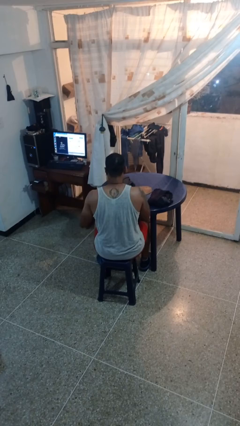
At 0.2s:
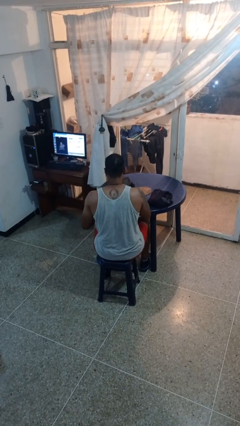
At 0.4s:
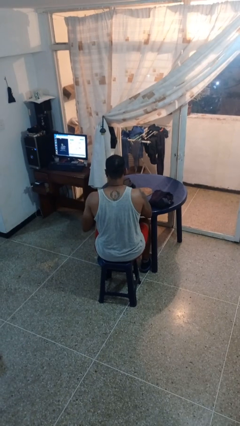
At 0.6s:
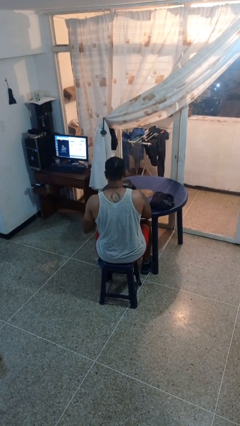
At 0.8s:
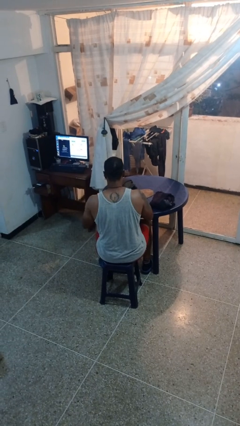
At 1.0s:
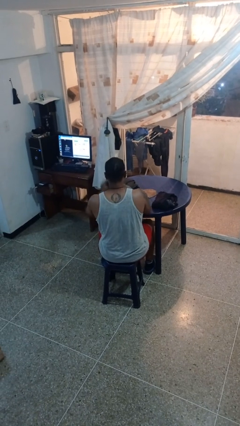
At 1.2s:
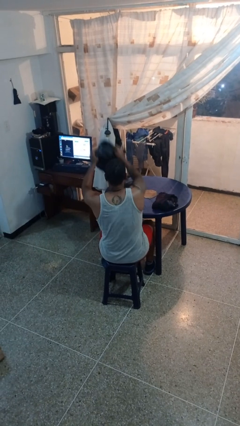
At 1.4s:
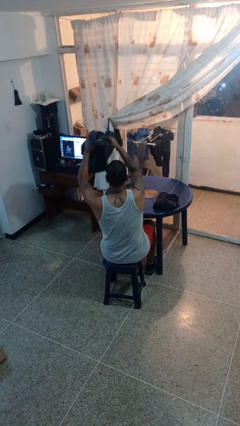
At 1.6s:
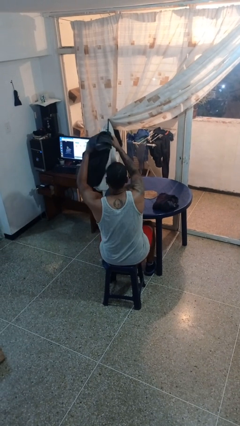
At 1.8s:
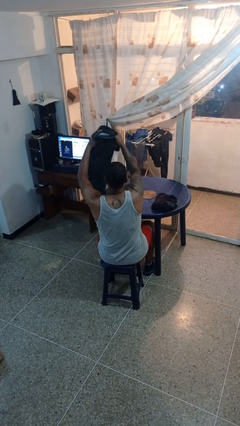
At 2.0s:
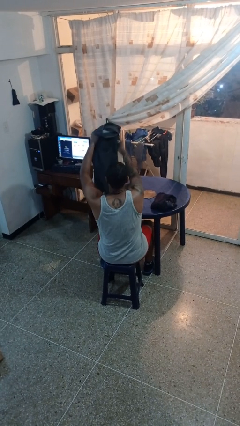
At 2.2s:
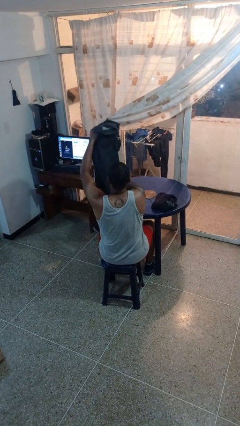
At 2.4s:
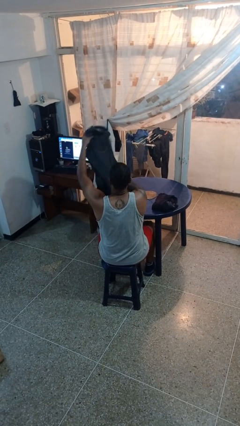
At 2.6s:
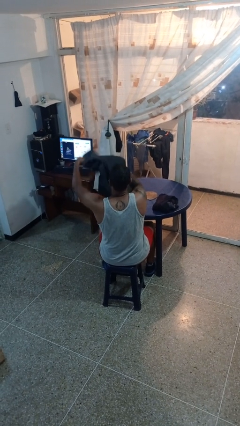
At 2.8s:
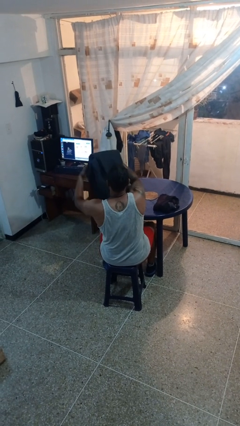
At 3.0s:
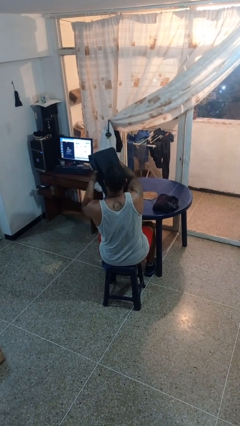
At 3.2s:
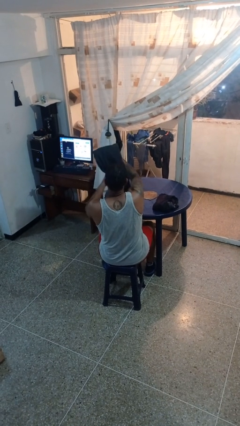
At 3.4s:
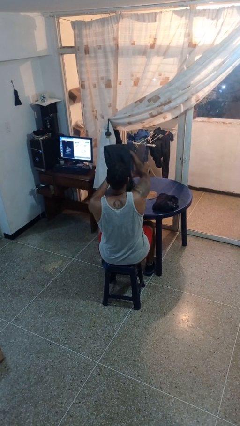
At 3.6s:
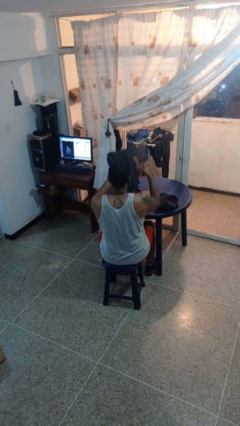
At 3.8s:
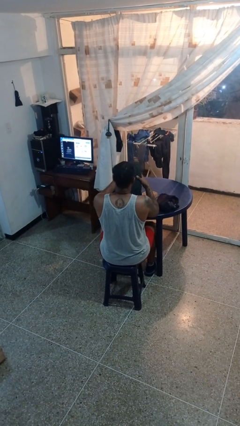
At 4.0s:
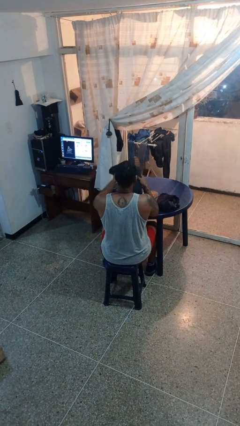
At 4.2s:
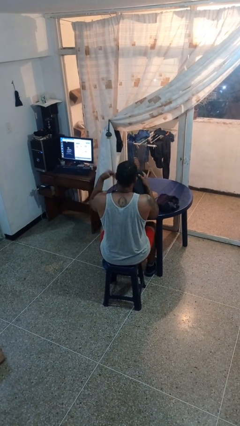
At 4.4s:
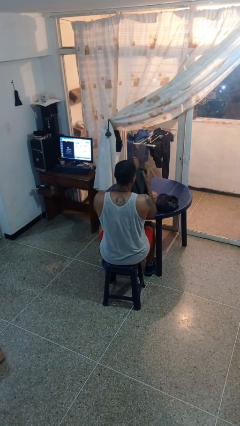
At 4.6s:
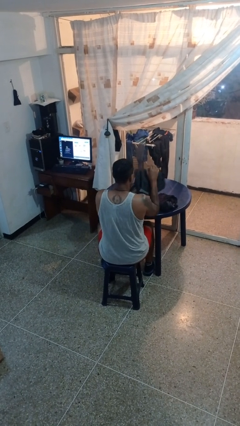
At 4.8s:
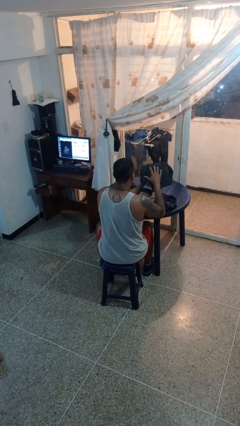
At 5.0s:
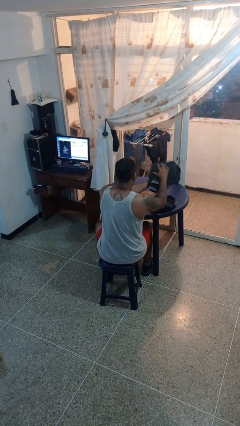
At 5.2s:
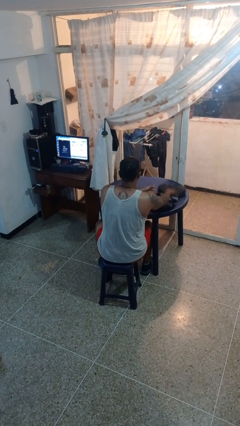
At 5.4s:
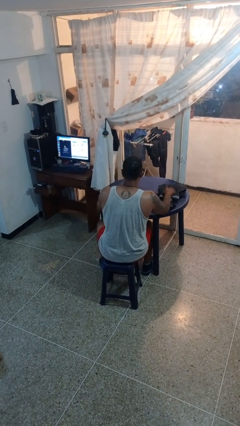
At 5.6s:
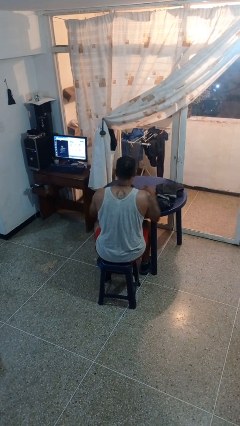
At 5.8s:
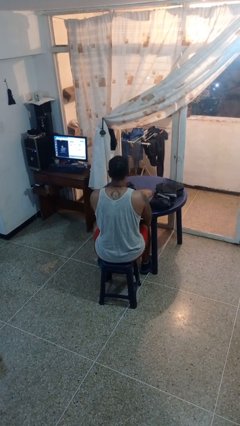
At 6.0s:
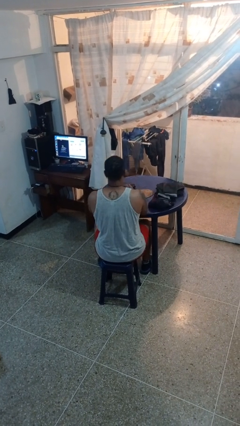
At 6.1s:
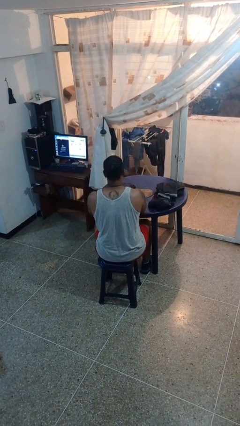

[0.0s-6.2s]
person folds pants

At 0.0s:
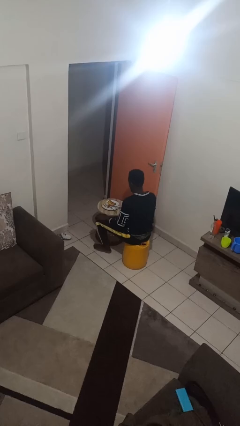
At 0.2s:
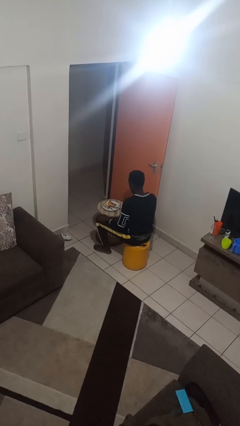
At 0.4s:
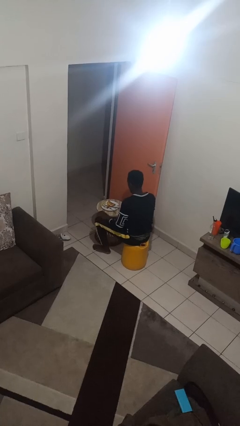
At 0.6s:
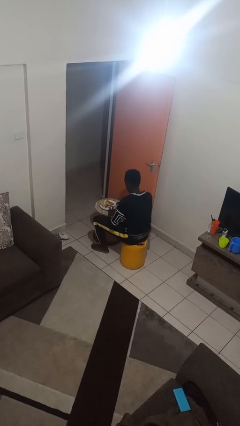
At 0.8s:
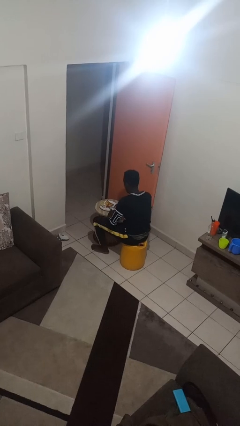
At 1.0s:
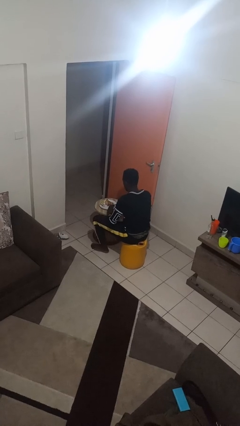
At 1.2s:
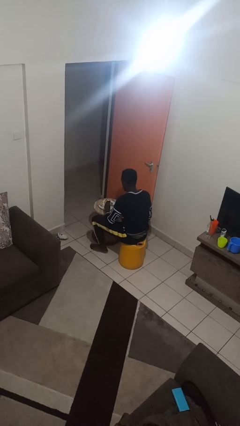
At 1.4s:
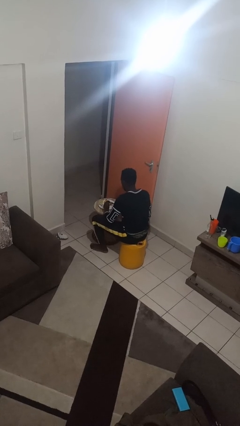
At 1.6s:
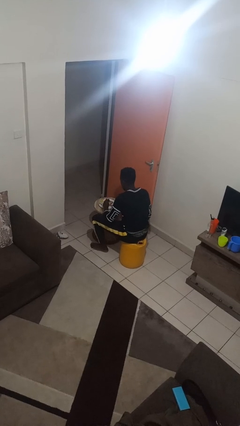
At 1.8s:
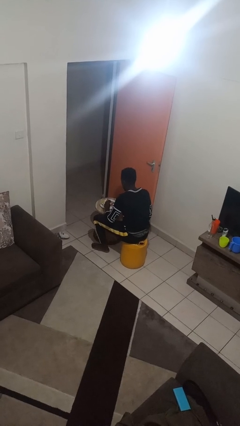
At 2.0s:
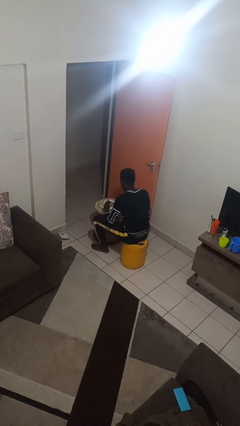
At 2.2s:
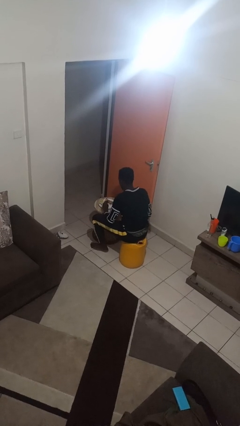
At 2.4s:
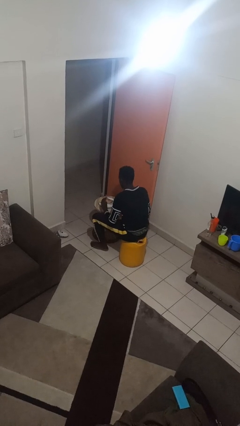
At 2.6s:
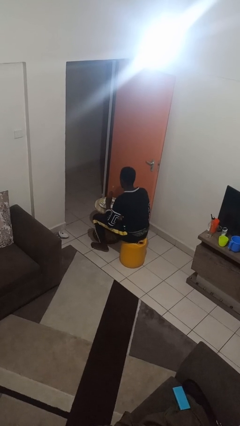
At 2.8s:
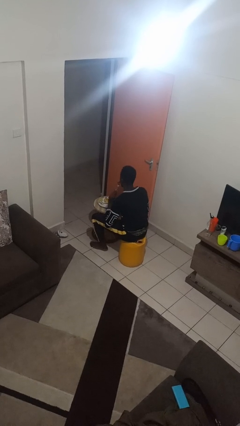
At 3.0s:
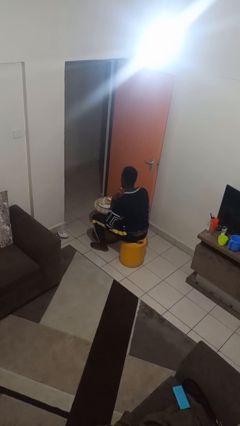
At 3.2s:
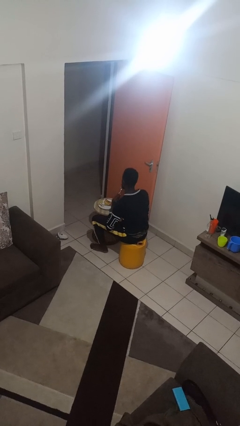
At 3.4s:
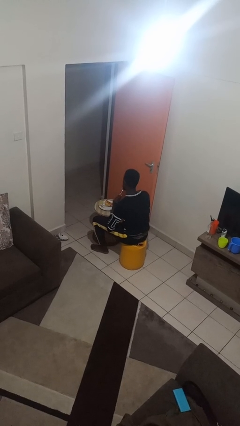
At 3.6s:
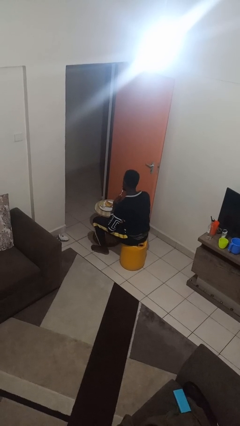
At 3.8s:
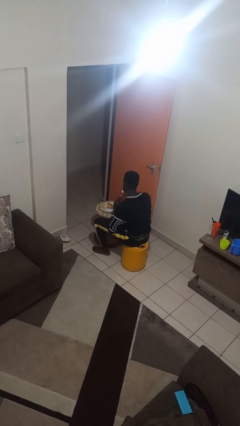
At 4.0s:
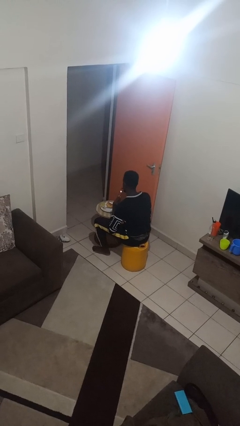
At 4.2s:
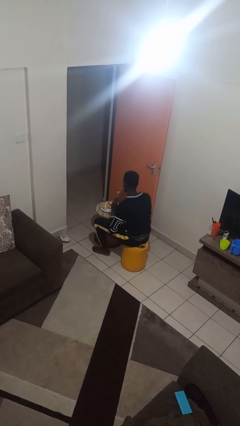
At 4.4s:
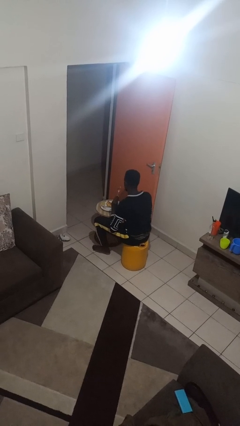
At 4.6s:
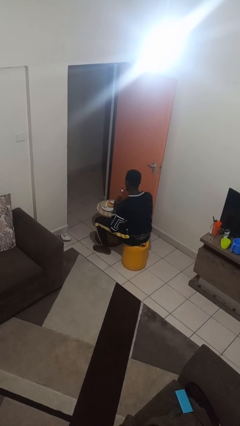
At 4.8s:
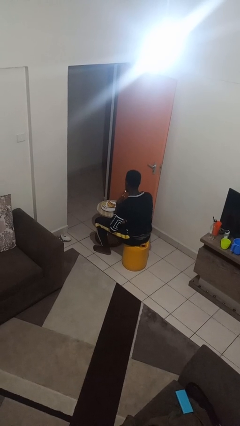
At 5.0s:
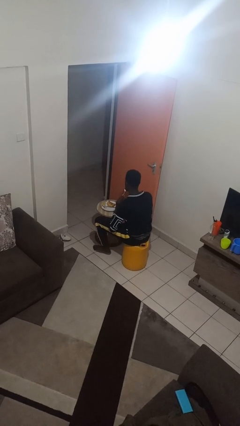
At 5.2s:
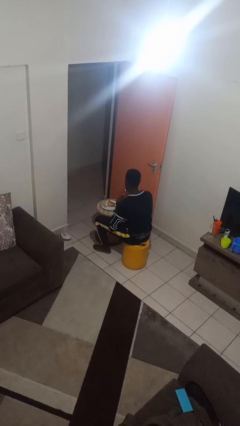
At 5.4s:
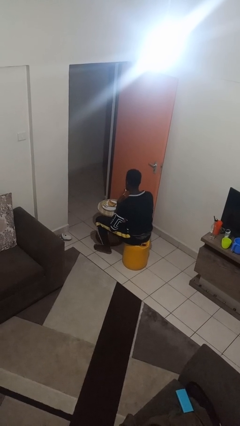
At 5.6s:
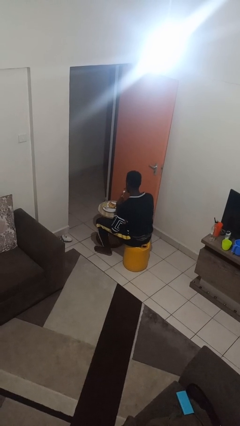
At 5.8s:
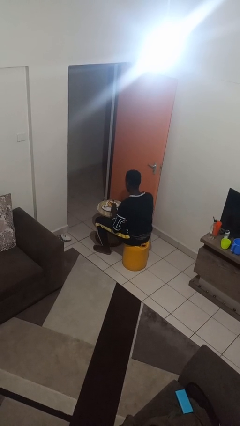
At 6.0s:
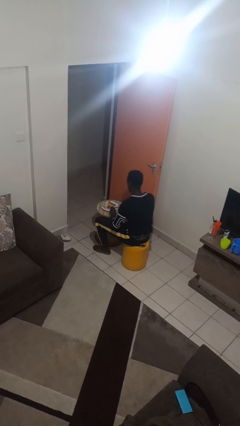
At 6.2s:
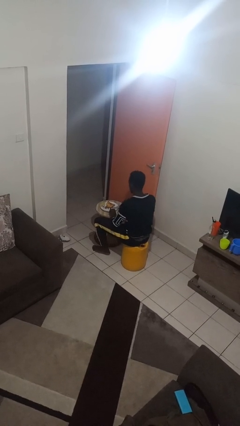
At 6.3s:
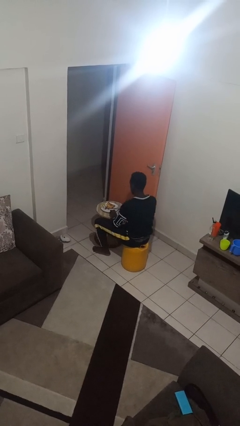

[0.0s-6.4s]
person eats with utensil

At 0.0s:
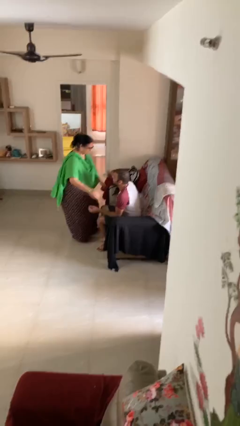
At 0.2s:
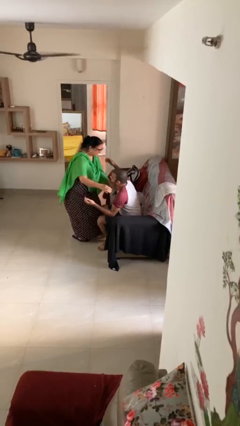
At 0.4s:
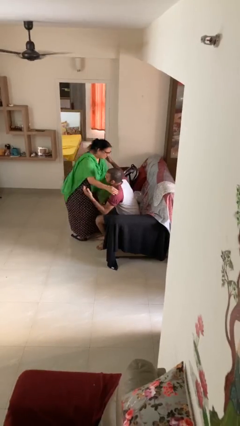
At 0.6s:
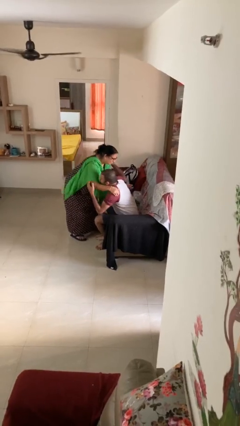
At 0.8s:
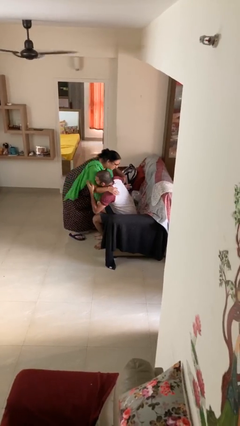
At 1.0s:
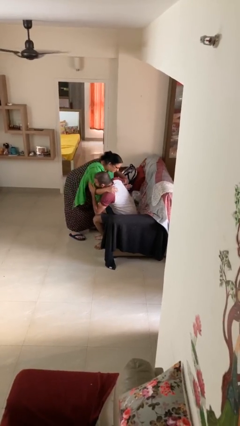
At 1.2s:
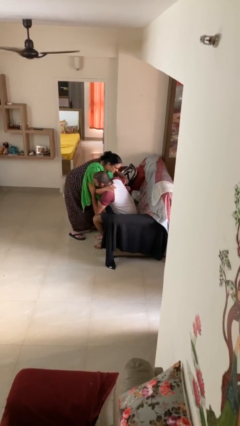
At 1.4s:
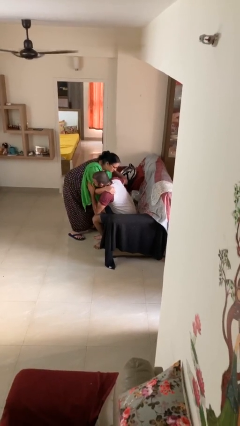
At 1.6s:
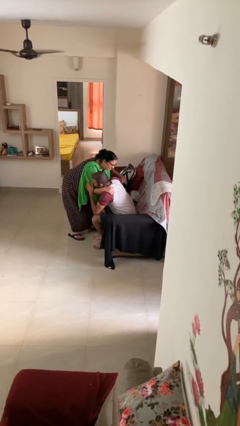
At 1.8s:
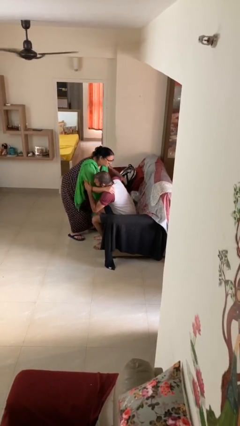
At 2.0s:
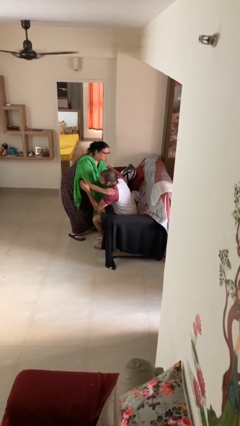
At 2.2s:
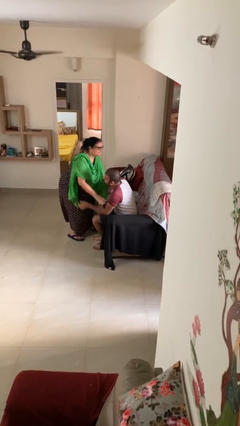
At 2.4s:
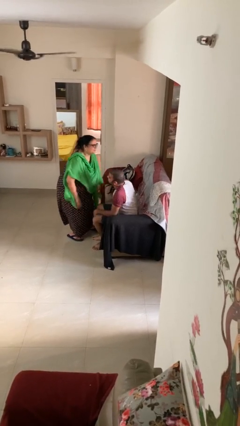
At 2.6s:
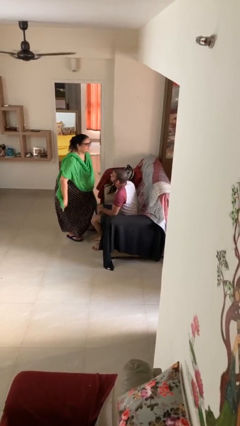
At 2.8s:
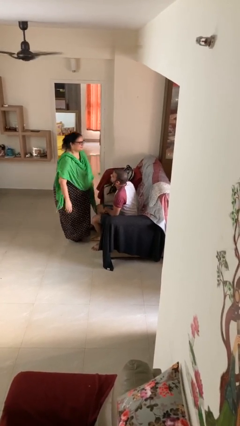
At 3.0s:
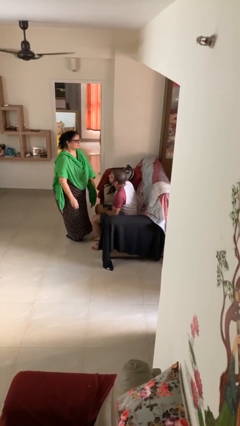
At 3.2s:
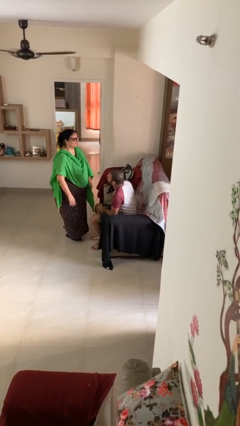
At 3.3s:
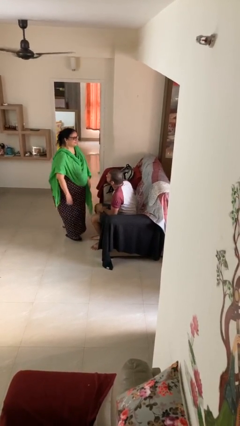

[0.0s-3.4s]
person embraces person

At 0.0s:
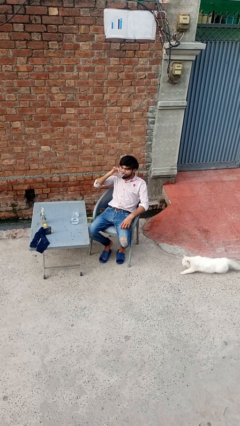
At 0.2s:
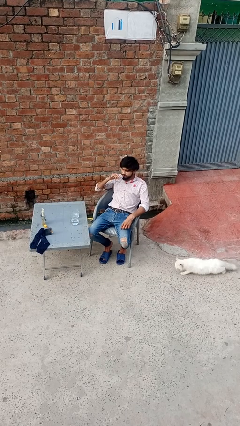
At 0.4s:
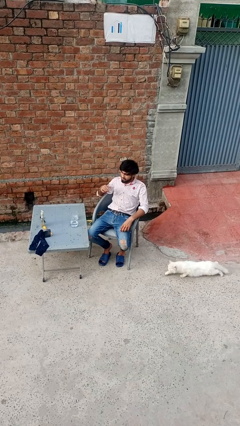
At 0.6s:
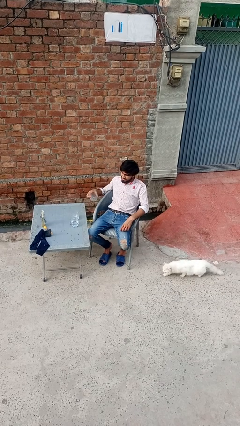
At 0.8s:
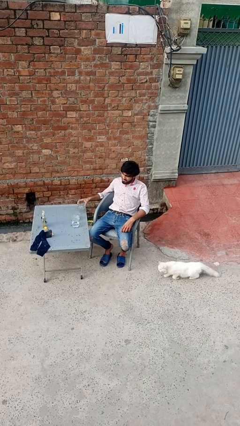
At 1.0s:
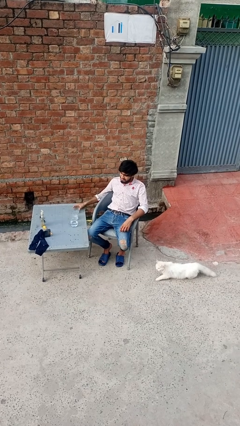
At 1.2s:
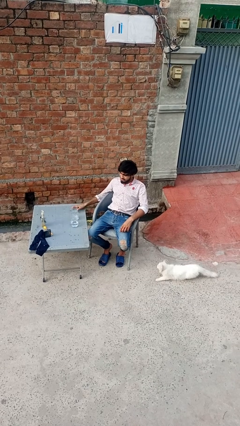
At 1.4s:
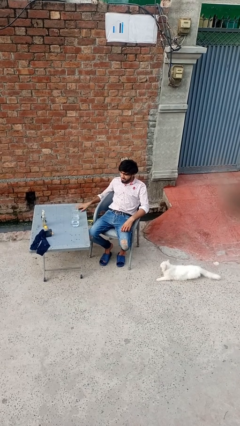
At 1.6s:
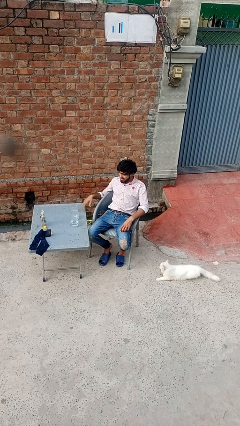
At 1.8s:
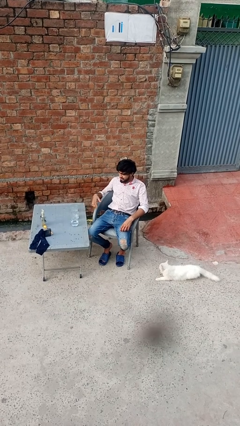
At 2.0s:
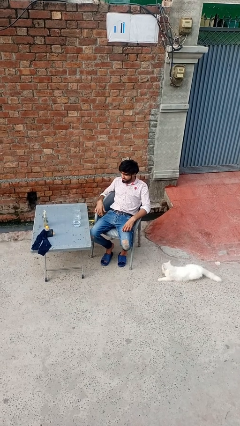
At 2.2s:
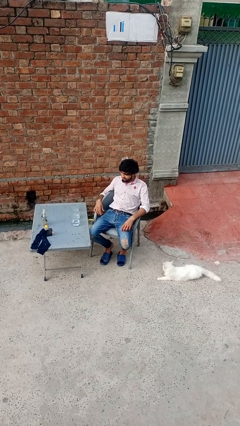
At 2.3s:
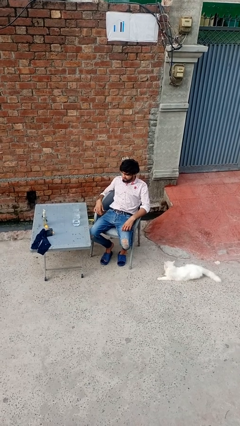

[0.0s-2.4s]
person puts down object on table
